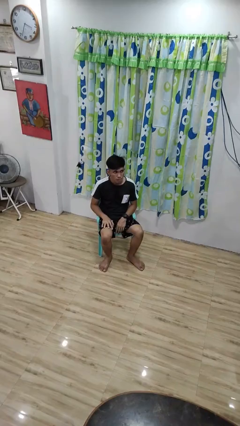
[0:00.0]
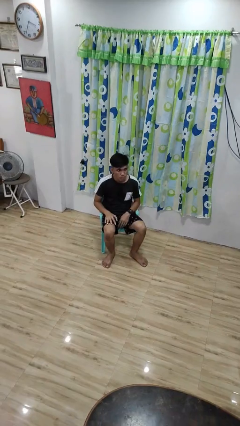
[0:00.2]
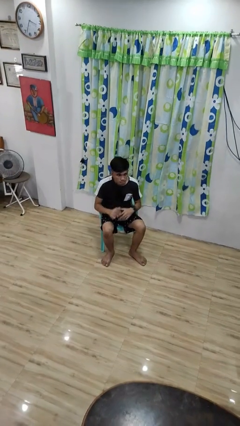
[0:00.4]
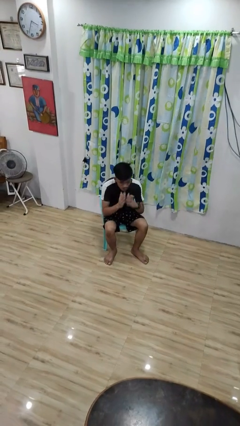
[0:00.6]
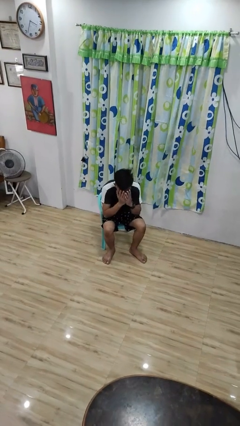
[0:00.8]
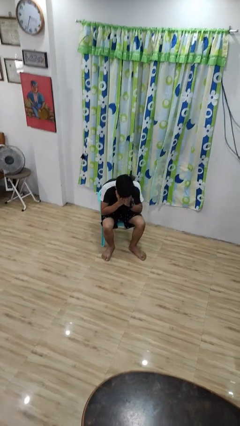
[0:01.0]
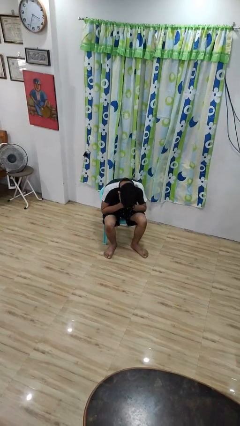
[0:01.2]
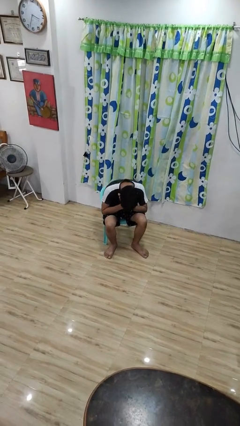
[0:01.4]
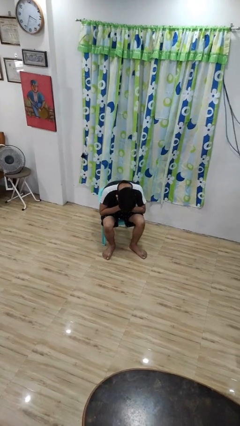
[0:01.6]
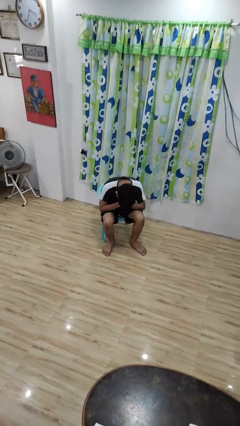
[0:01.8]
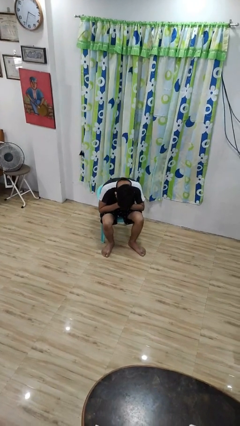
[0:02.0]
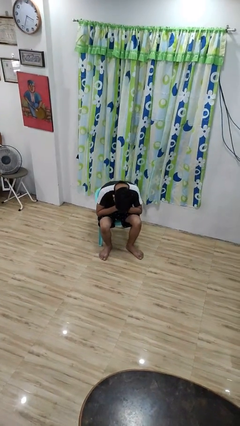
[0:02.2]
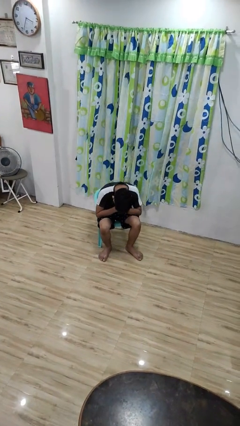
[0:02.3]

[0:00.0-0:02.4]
person covers face with hands

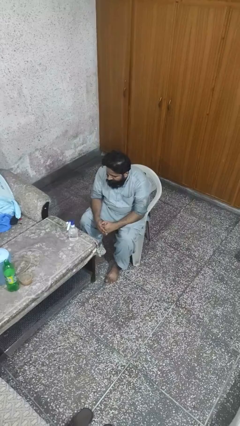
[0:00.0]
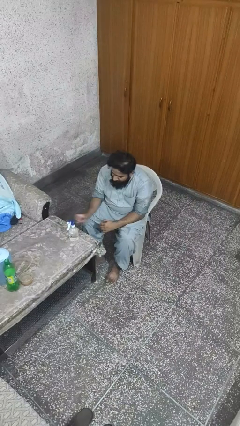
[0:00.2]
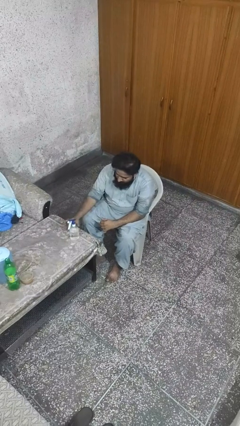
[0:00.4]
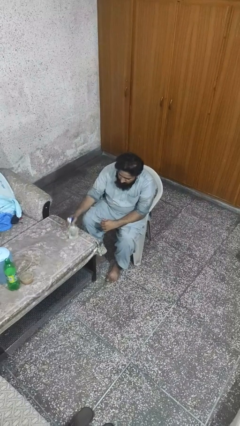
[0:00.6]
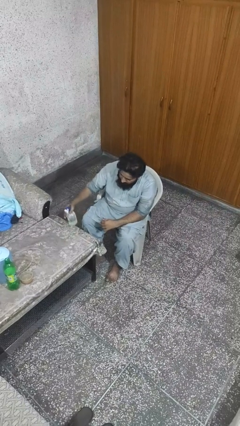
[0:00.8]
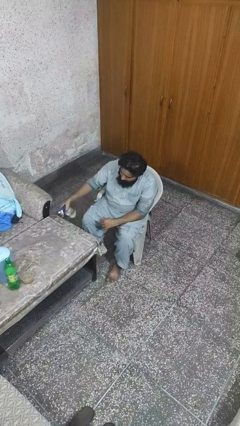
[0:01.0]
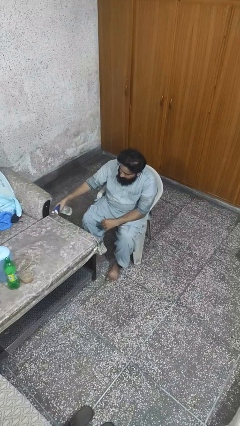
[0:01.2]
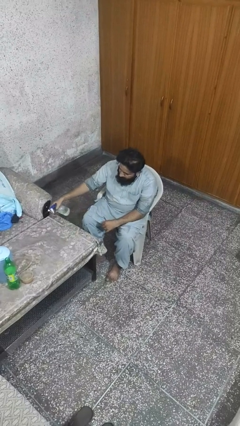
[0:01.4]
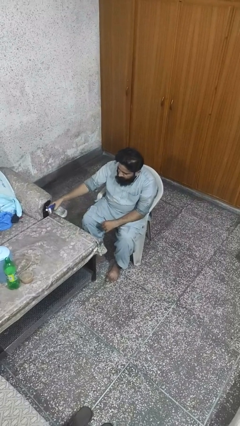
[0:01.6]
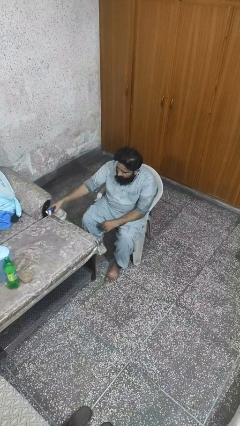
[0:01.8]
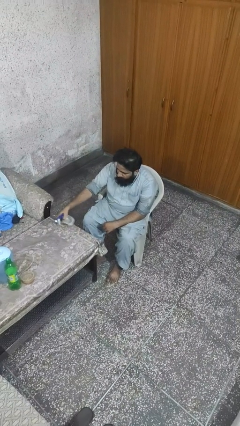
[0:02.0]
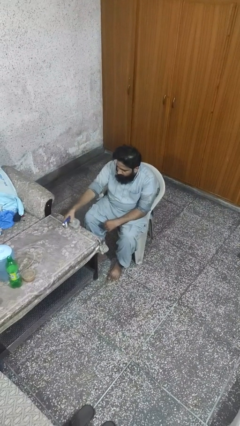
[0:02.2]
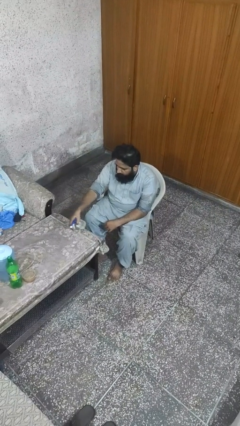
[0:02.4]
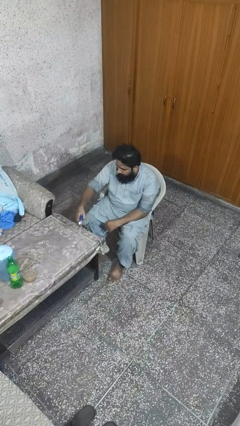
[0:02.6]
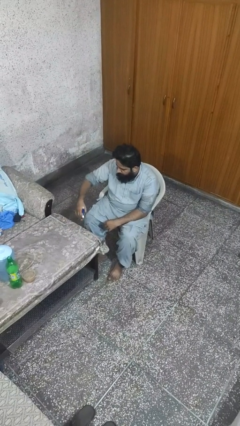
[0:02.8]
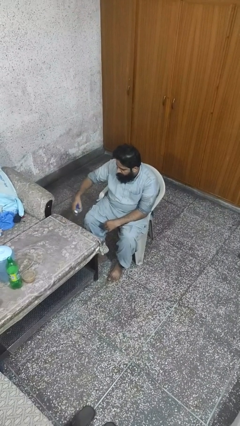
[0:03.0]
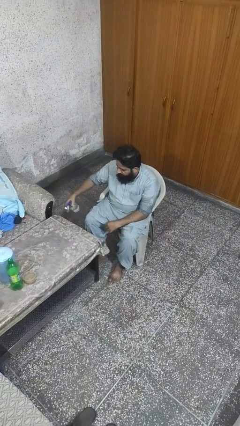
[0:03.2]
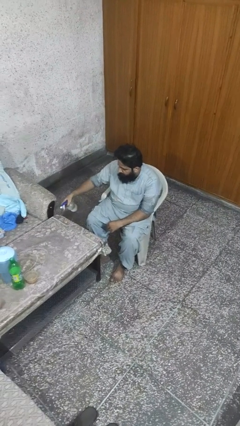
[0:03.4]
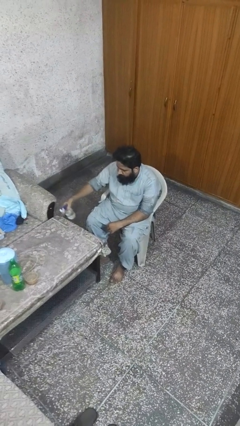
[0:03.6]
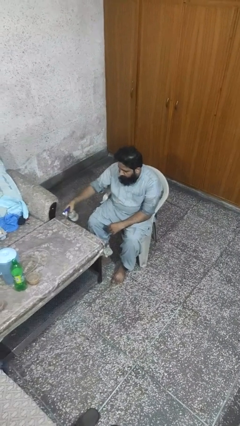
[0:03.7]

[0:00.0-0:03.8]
person sprays from bottle

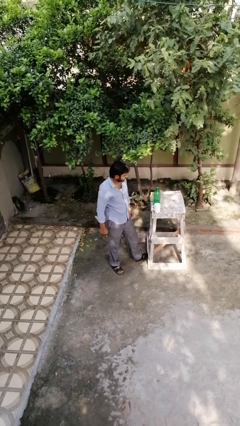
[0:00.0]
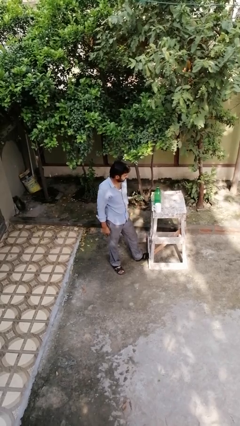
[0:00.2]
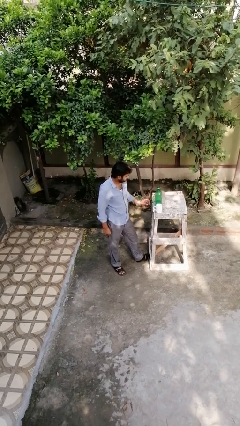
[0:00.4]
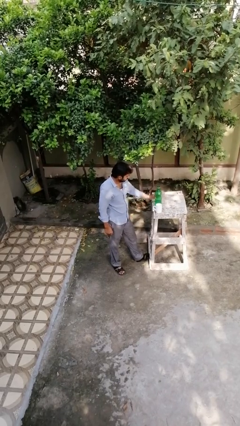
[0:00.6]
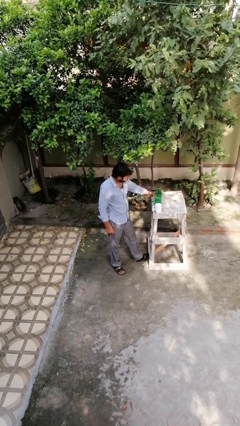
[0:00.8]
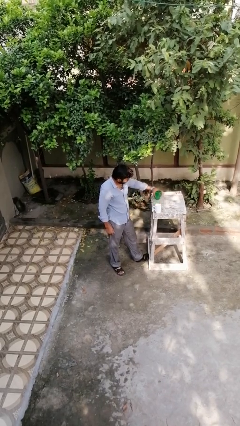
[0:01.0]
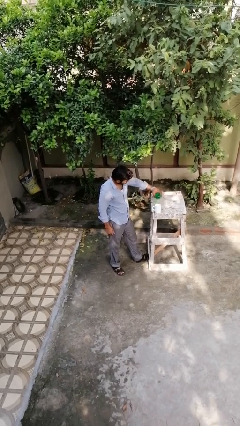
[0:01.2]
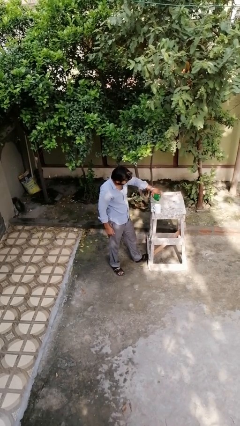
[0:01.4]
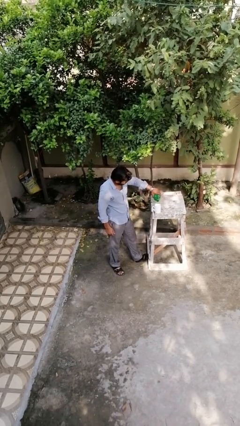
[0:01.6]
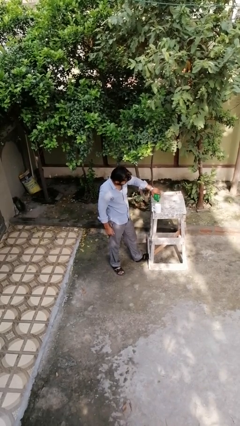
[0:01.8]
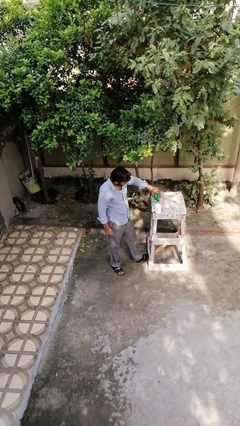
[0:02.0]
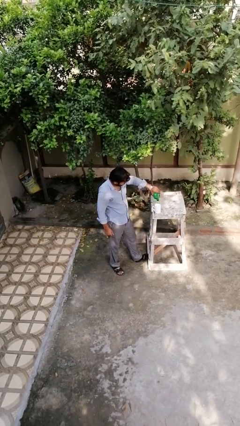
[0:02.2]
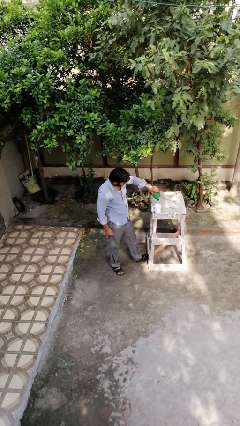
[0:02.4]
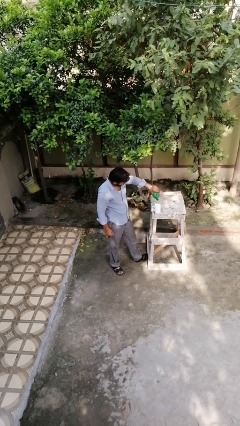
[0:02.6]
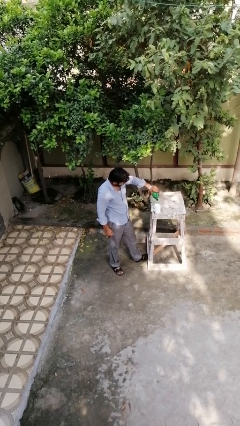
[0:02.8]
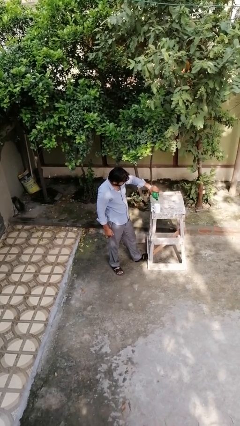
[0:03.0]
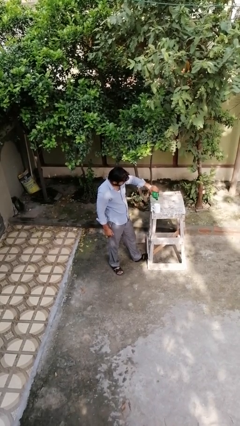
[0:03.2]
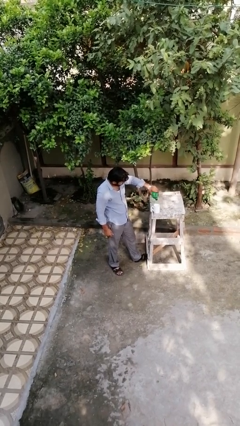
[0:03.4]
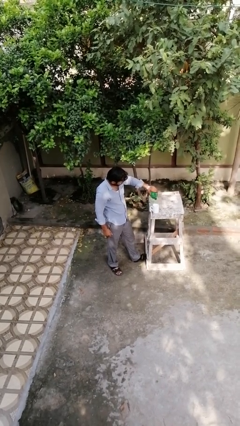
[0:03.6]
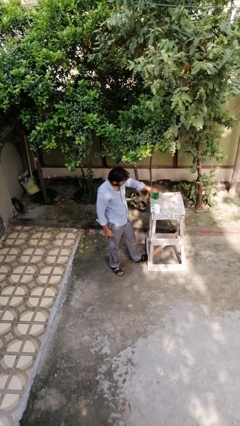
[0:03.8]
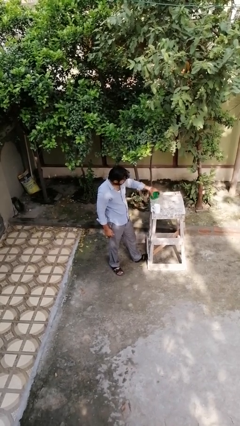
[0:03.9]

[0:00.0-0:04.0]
person pours liquid into cup

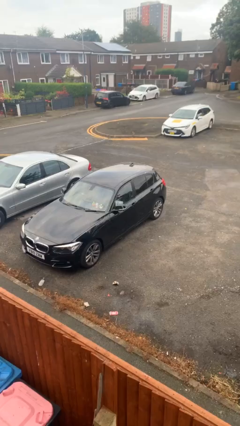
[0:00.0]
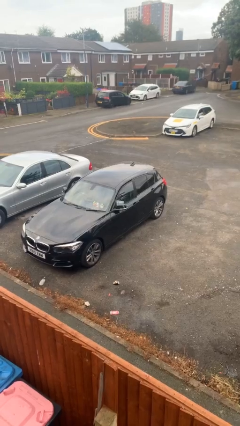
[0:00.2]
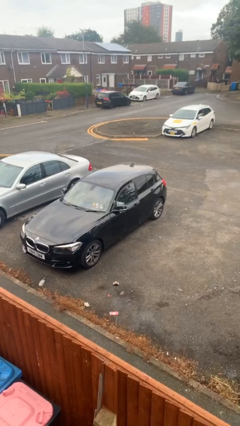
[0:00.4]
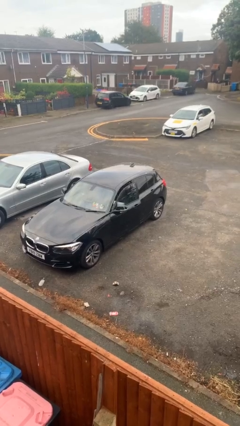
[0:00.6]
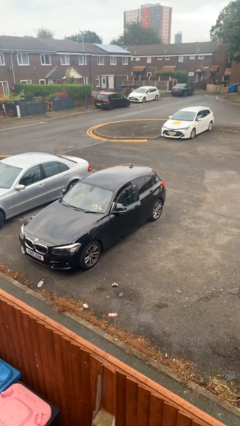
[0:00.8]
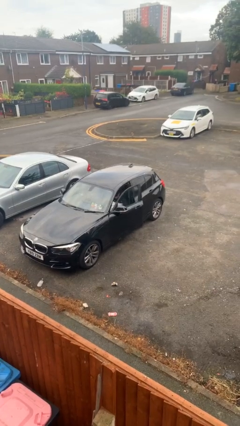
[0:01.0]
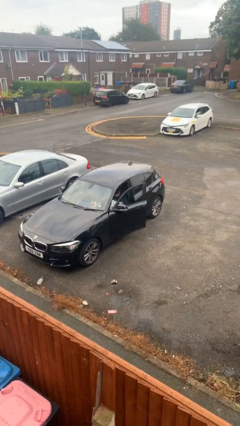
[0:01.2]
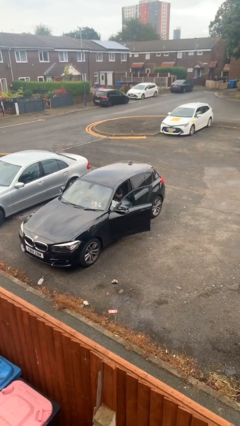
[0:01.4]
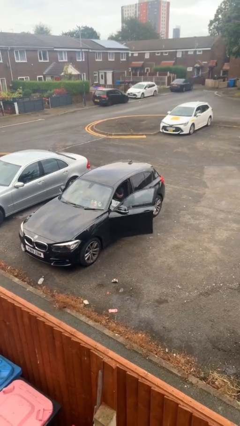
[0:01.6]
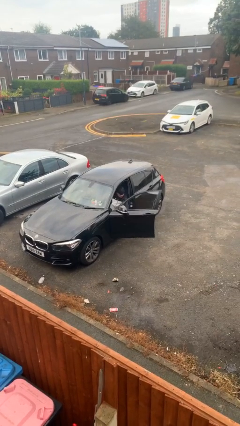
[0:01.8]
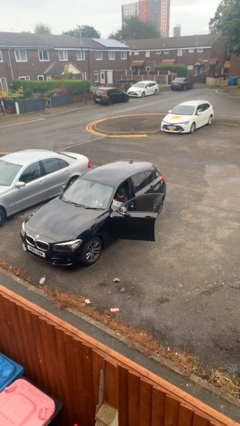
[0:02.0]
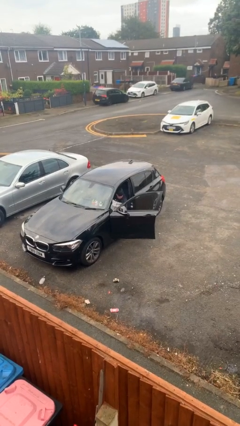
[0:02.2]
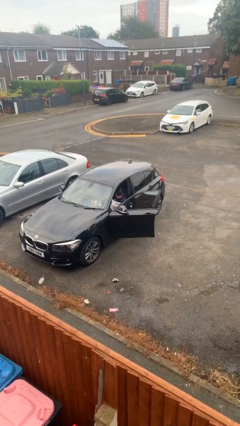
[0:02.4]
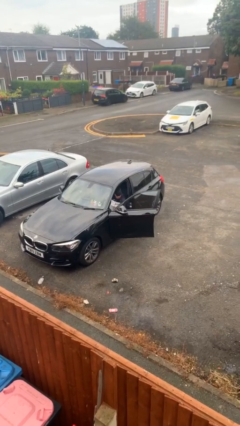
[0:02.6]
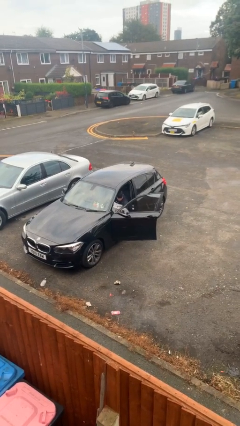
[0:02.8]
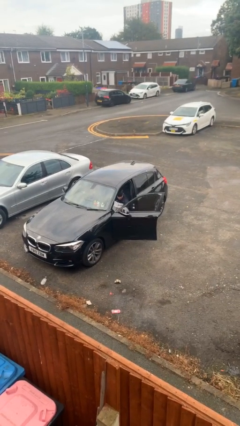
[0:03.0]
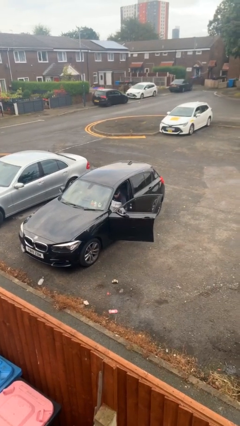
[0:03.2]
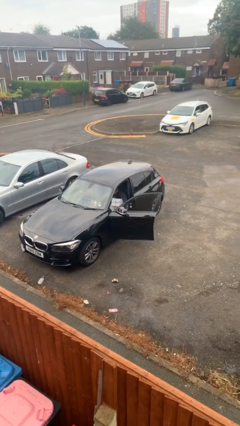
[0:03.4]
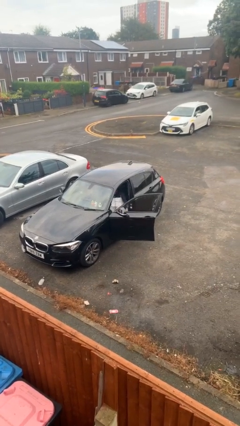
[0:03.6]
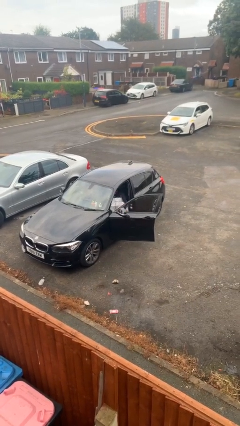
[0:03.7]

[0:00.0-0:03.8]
person opens car door

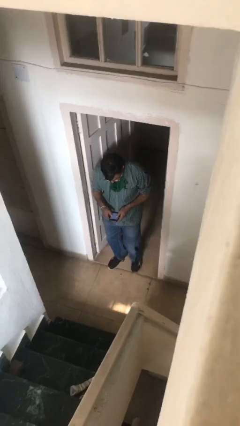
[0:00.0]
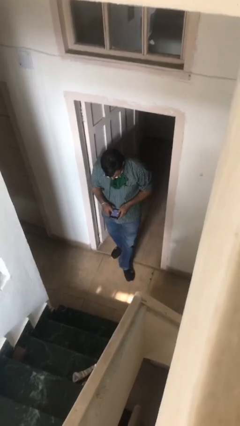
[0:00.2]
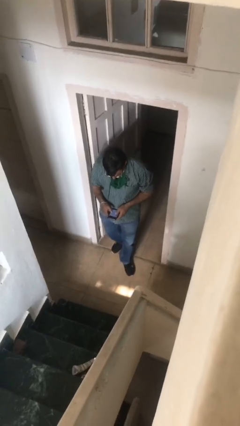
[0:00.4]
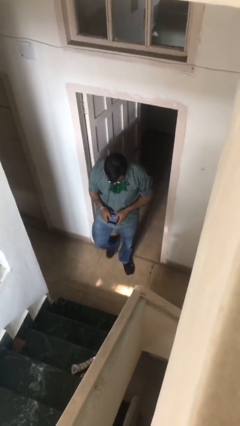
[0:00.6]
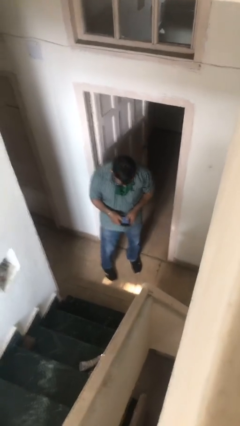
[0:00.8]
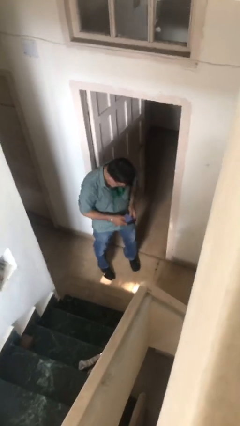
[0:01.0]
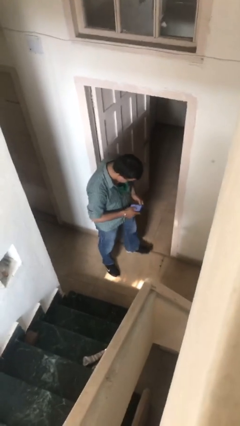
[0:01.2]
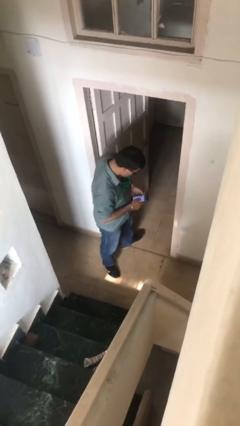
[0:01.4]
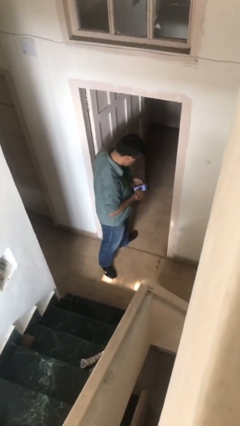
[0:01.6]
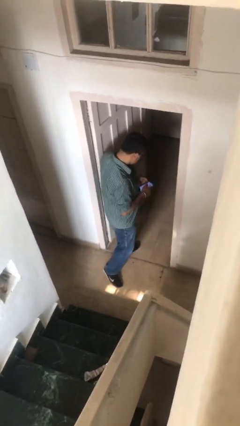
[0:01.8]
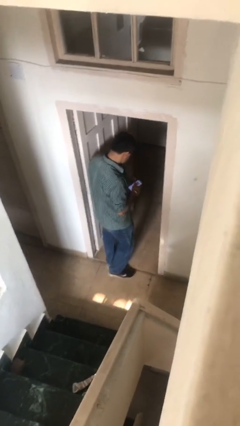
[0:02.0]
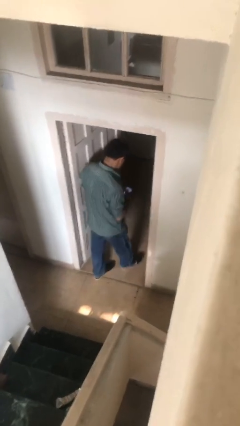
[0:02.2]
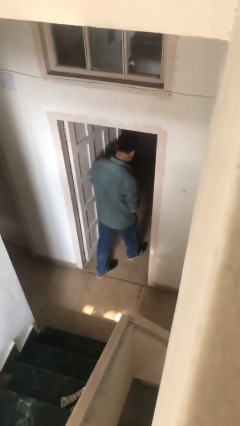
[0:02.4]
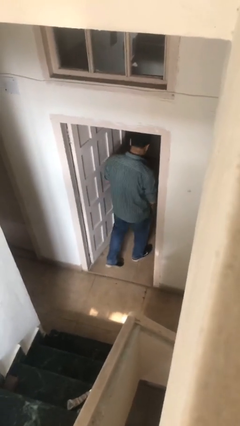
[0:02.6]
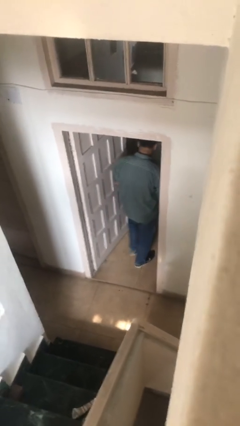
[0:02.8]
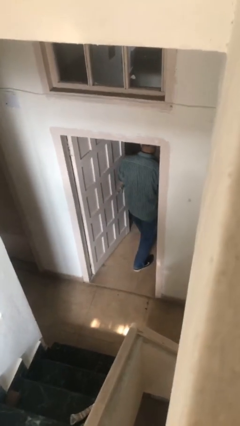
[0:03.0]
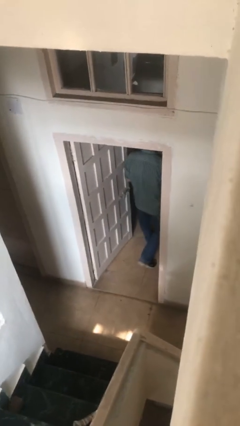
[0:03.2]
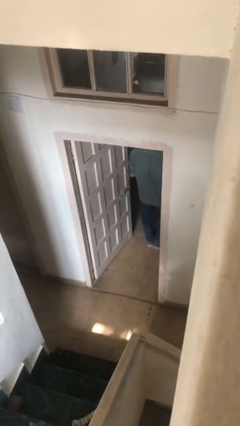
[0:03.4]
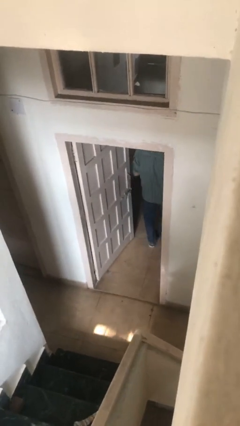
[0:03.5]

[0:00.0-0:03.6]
person exits scene through structure
